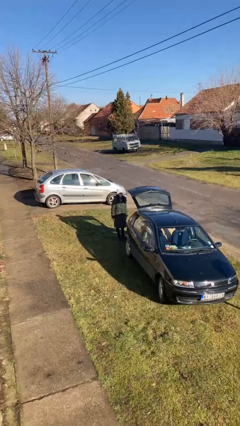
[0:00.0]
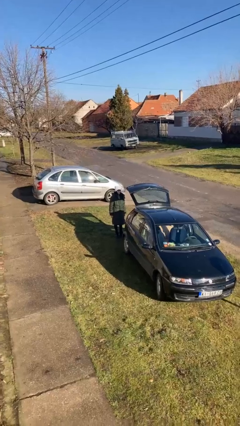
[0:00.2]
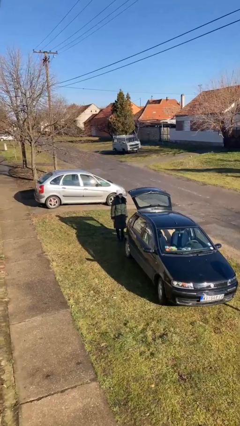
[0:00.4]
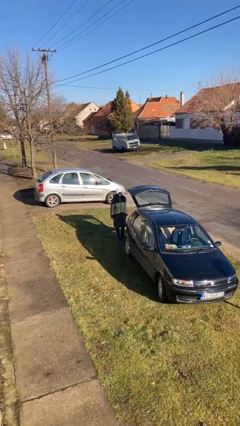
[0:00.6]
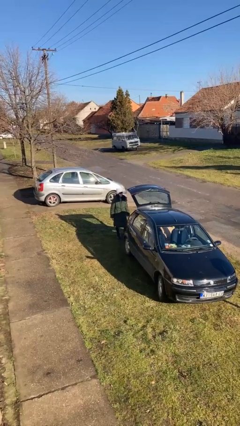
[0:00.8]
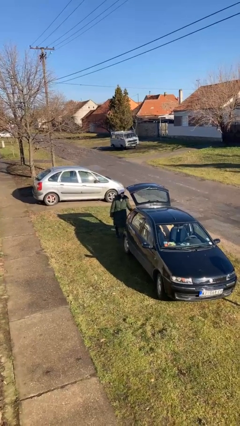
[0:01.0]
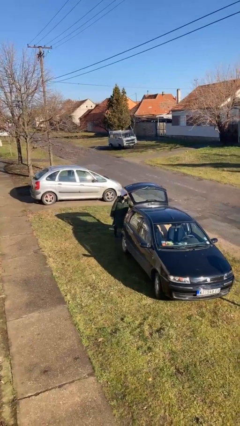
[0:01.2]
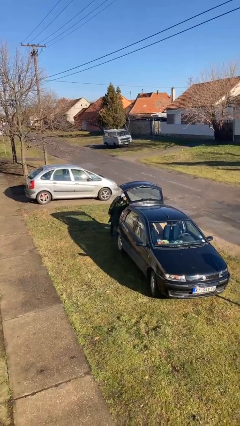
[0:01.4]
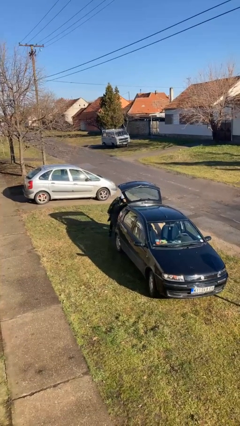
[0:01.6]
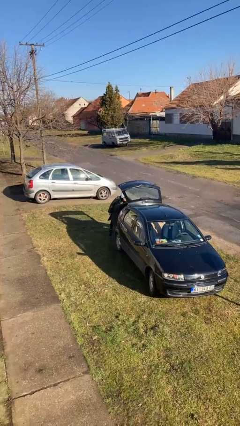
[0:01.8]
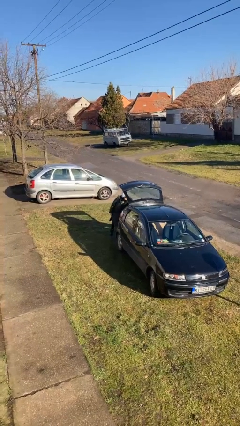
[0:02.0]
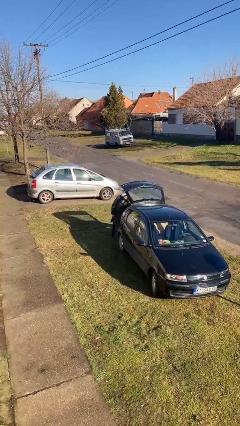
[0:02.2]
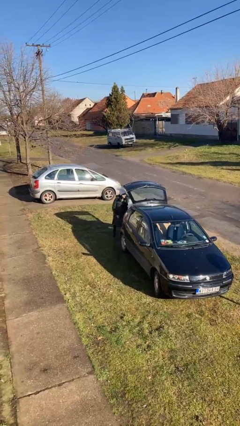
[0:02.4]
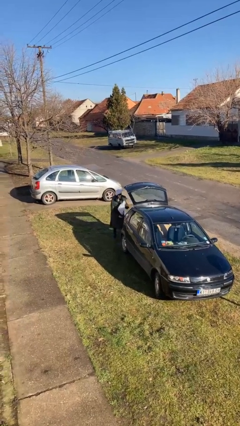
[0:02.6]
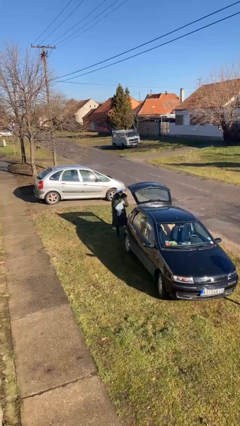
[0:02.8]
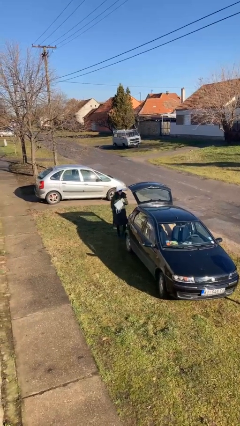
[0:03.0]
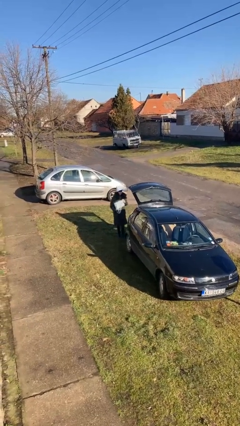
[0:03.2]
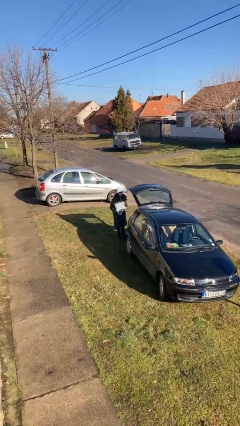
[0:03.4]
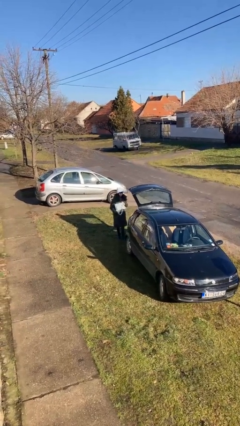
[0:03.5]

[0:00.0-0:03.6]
person unloads car

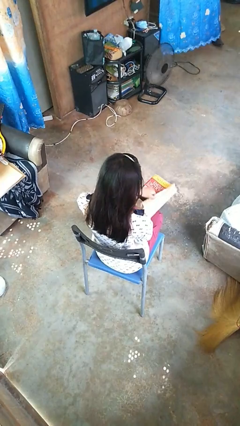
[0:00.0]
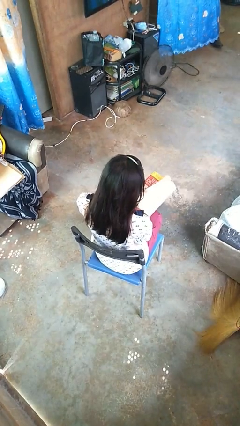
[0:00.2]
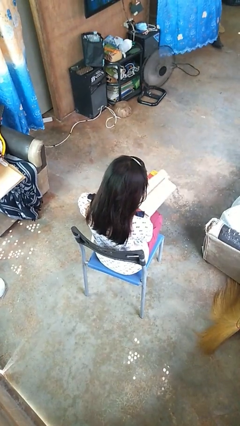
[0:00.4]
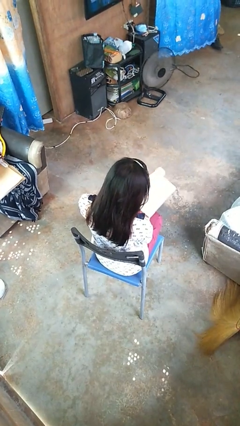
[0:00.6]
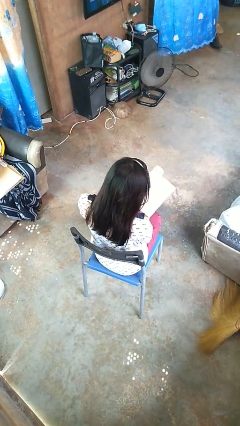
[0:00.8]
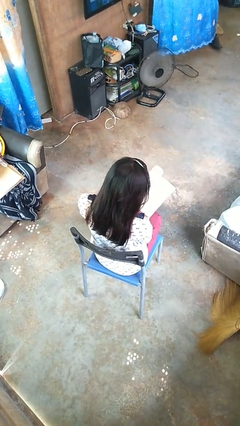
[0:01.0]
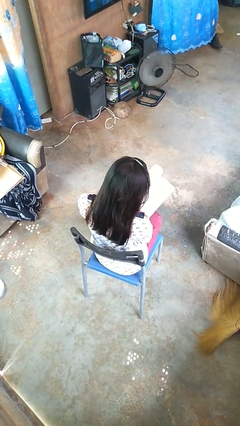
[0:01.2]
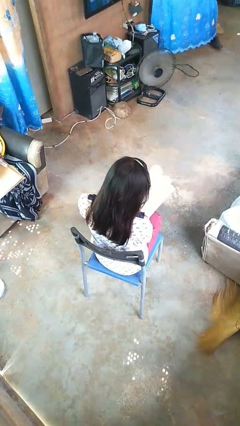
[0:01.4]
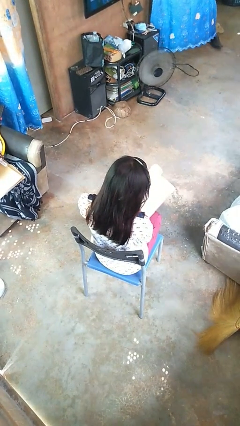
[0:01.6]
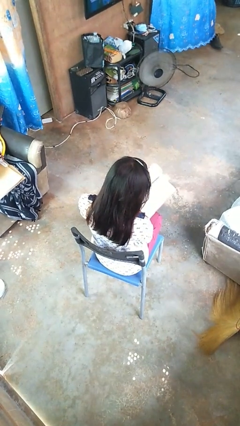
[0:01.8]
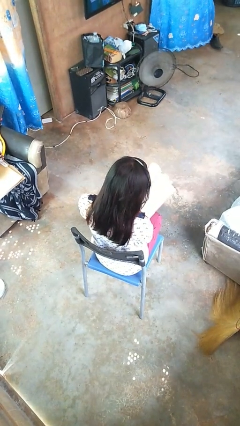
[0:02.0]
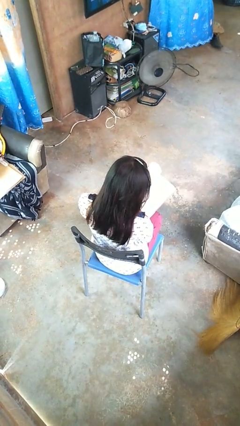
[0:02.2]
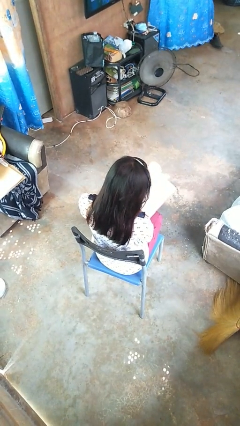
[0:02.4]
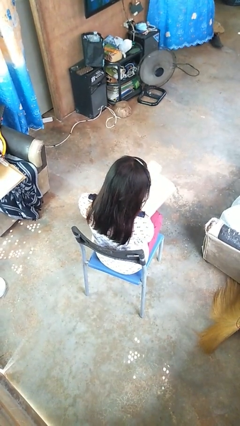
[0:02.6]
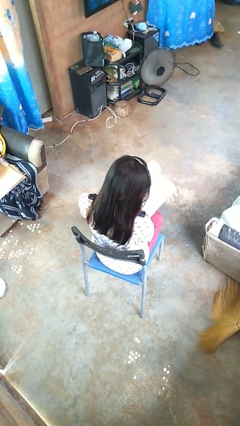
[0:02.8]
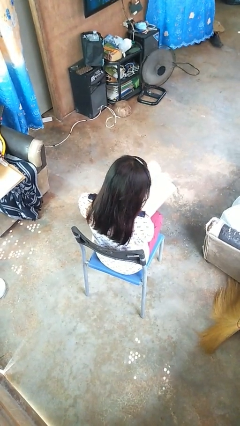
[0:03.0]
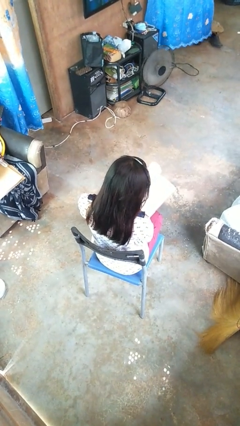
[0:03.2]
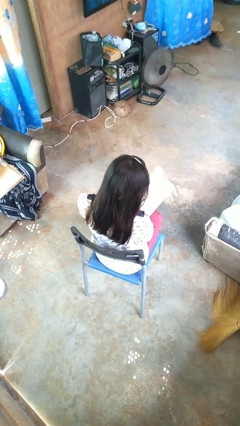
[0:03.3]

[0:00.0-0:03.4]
person reads book

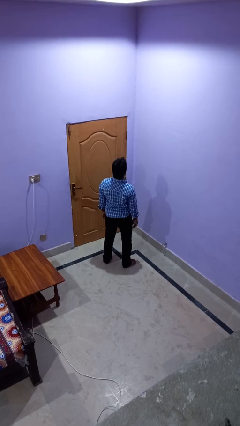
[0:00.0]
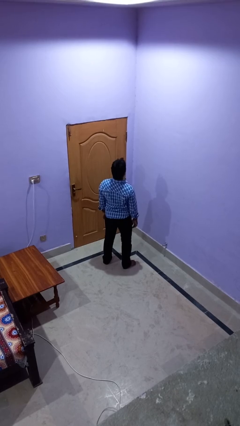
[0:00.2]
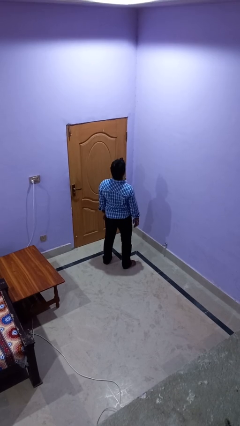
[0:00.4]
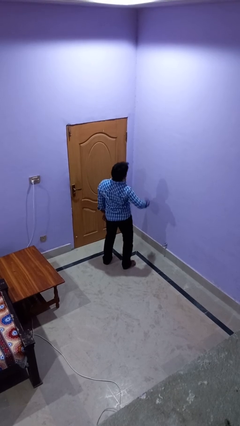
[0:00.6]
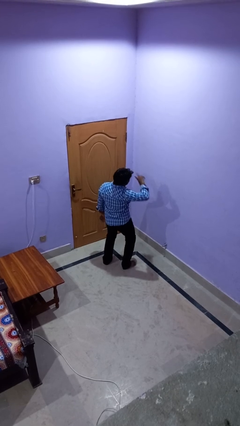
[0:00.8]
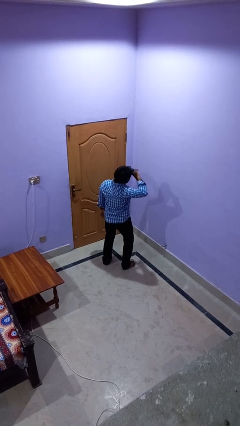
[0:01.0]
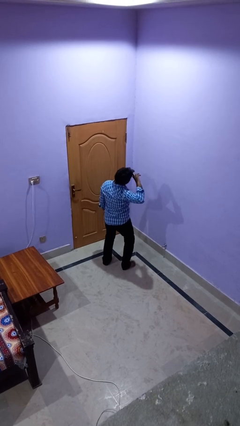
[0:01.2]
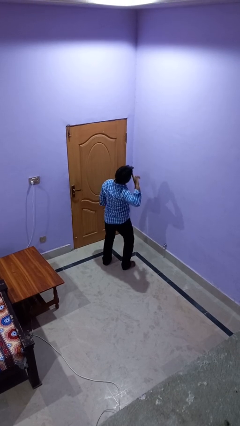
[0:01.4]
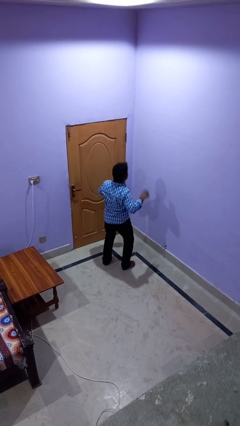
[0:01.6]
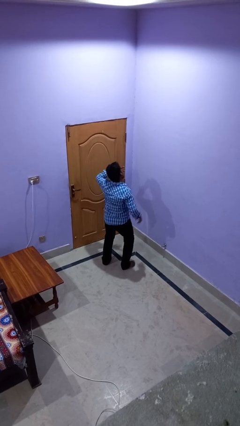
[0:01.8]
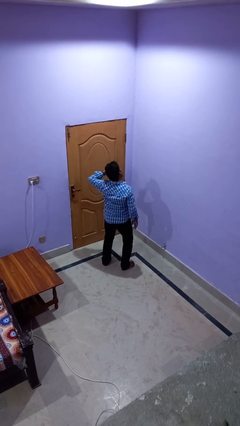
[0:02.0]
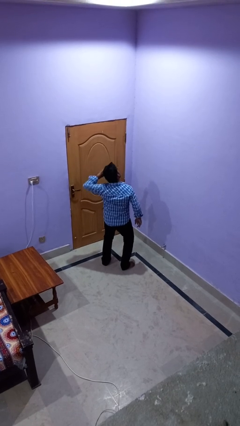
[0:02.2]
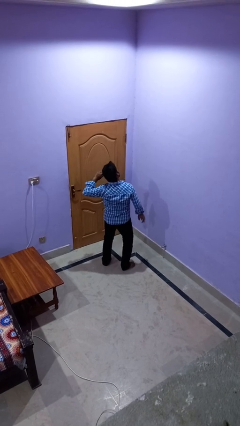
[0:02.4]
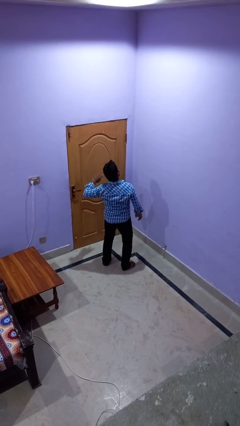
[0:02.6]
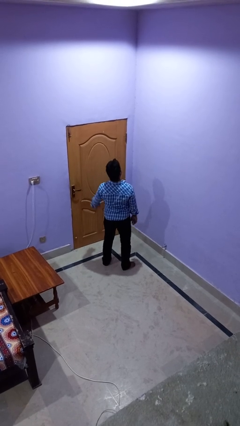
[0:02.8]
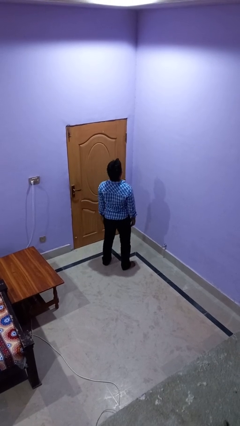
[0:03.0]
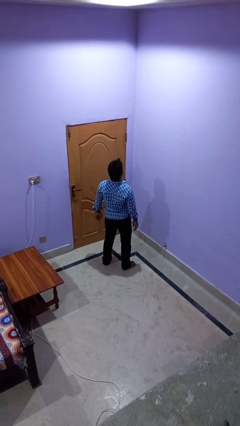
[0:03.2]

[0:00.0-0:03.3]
person dances in place

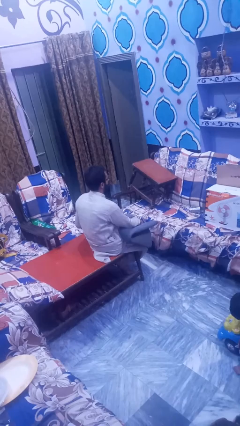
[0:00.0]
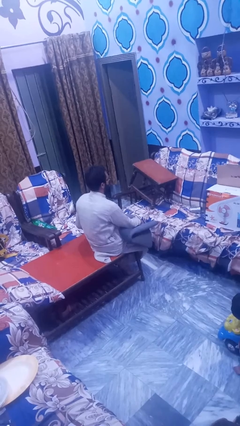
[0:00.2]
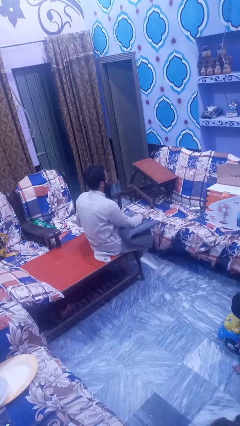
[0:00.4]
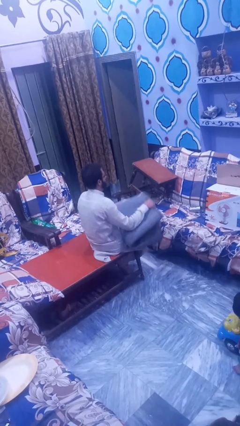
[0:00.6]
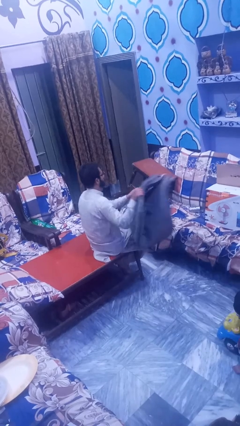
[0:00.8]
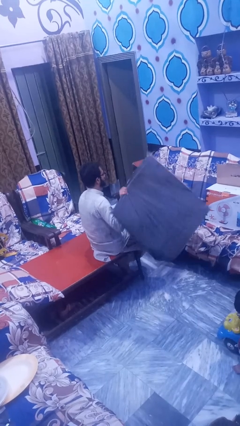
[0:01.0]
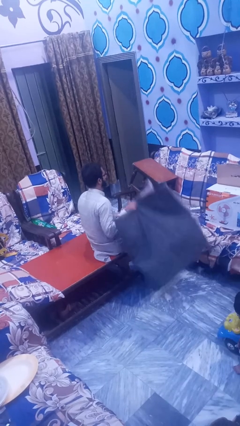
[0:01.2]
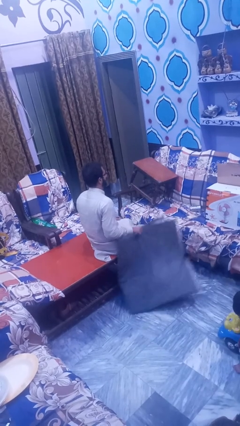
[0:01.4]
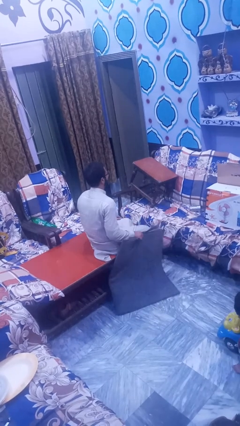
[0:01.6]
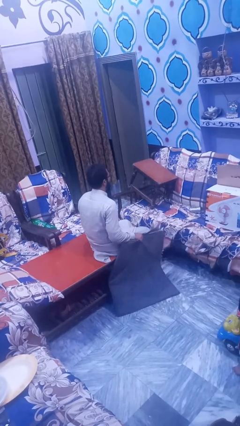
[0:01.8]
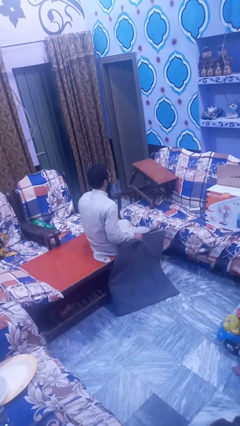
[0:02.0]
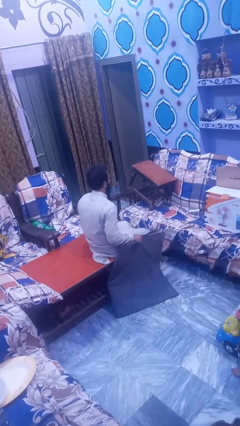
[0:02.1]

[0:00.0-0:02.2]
person unfolds blanket

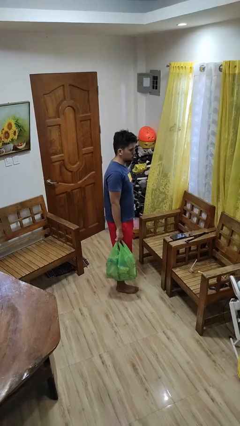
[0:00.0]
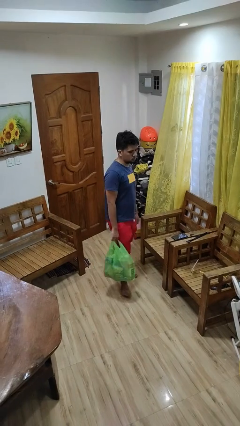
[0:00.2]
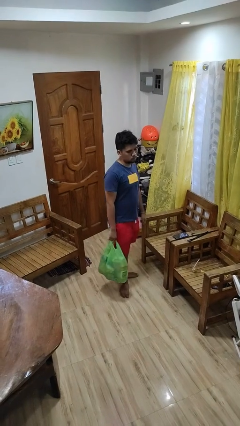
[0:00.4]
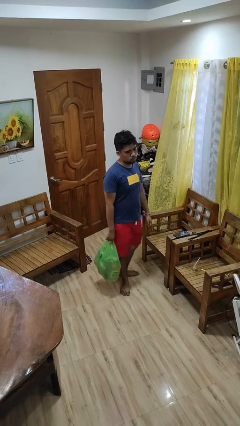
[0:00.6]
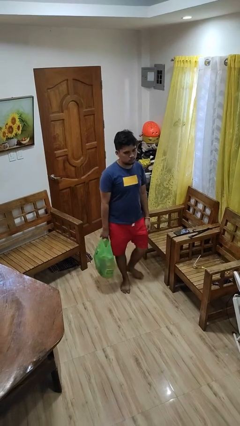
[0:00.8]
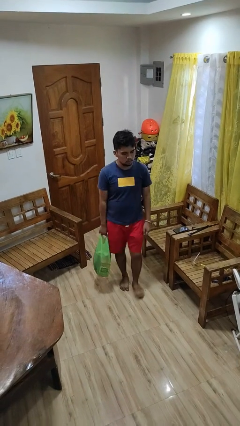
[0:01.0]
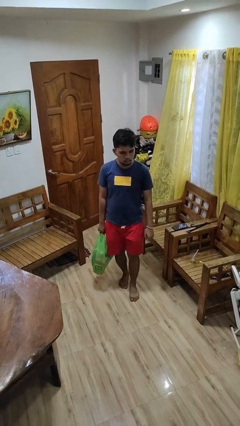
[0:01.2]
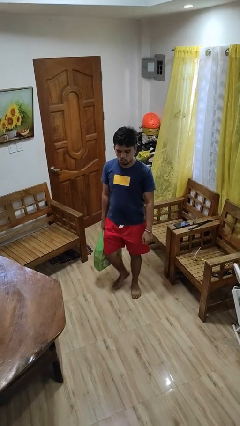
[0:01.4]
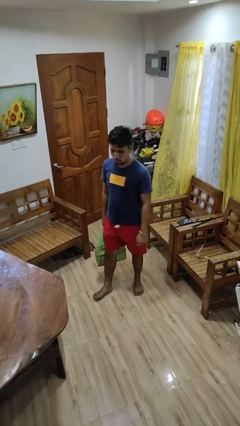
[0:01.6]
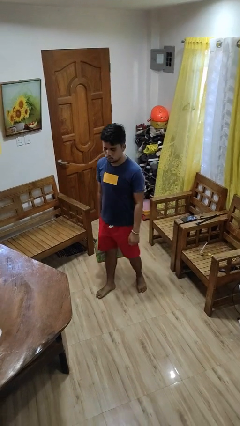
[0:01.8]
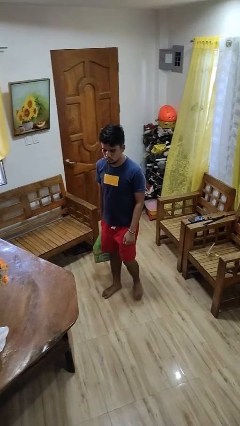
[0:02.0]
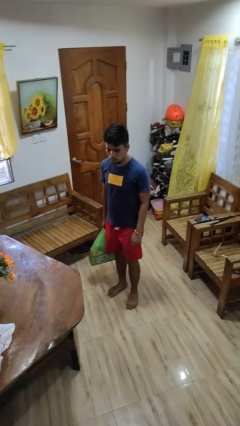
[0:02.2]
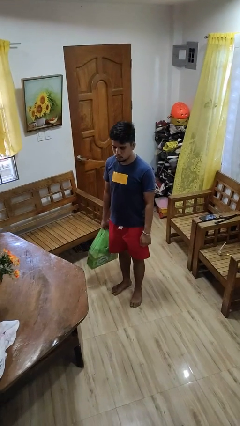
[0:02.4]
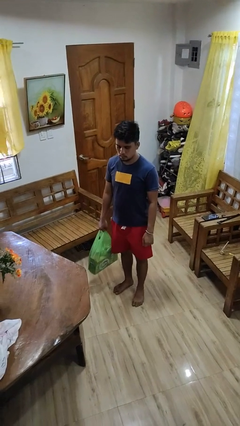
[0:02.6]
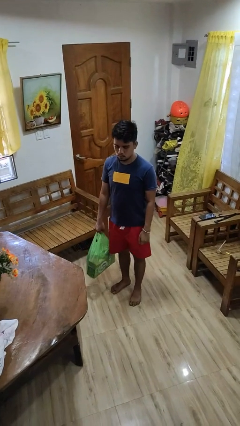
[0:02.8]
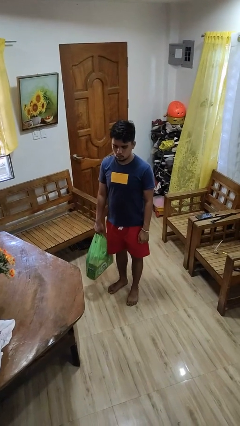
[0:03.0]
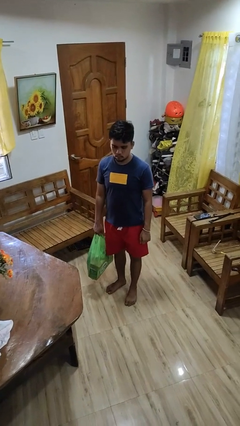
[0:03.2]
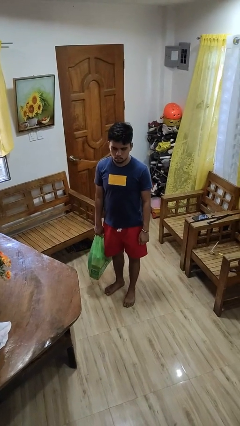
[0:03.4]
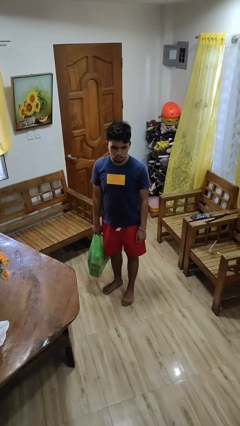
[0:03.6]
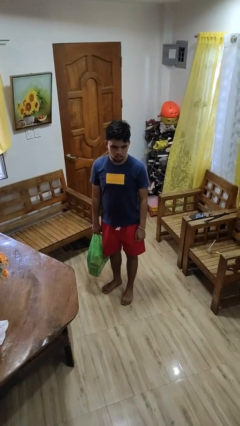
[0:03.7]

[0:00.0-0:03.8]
person carries groceries

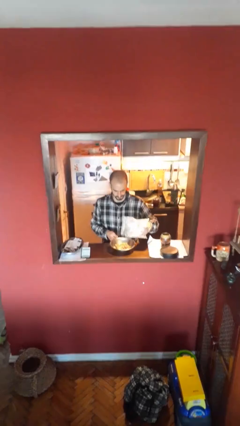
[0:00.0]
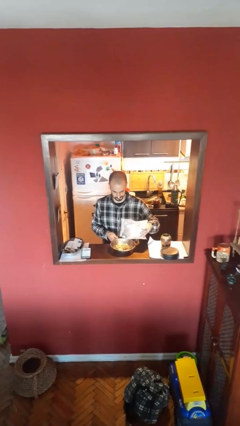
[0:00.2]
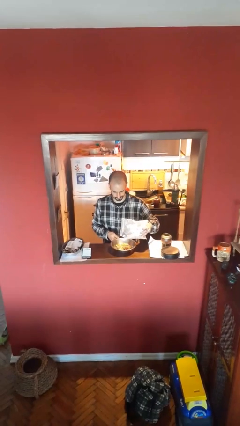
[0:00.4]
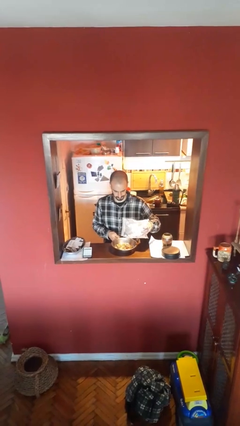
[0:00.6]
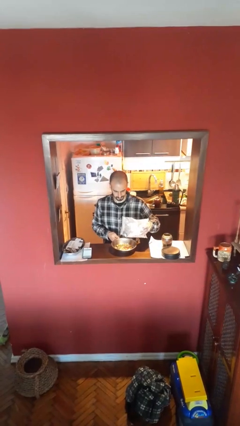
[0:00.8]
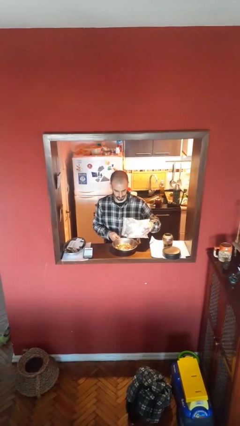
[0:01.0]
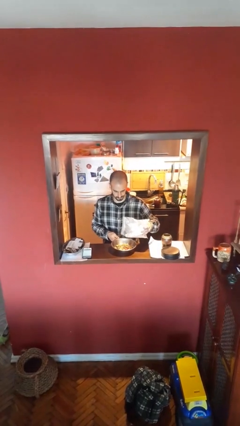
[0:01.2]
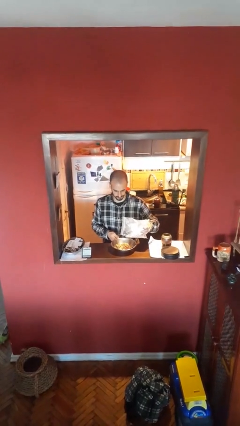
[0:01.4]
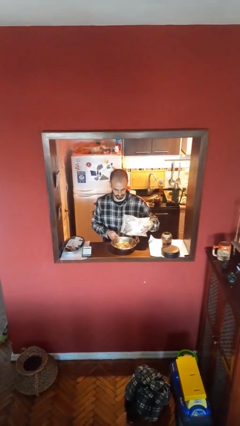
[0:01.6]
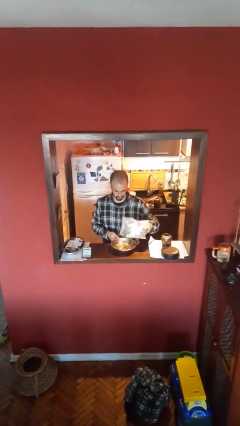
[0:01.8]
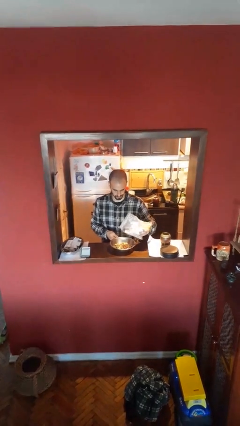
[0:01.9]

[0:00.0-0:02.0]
person pours into bowl
